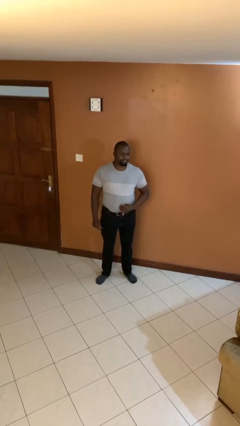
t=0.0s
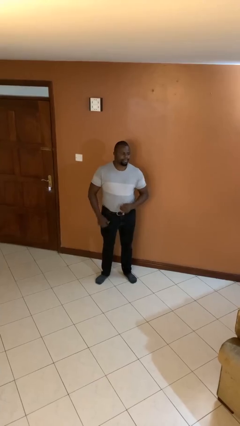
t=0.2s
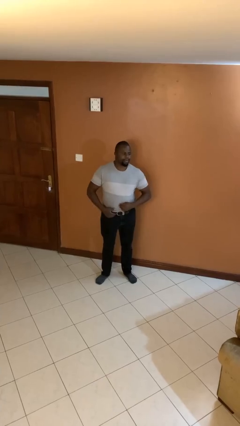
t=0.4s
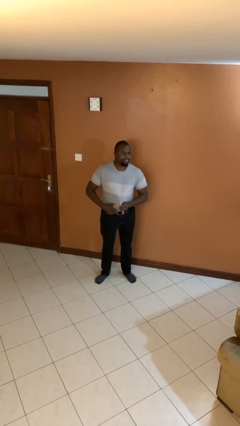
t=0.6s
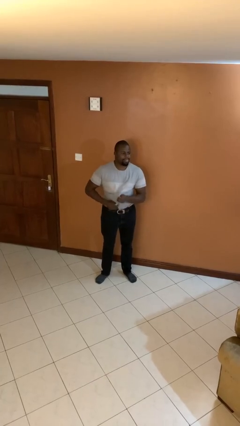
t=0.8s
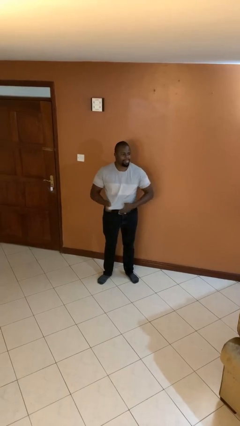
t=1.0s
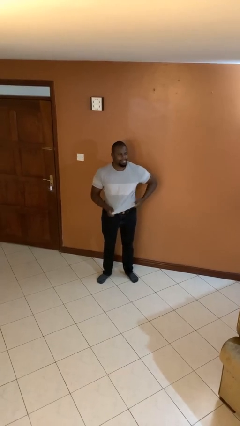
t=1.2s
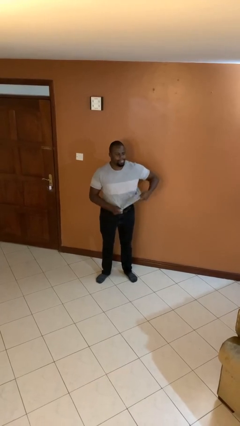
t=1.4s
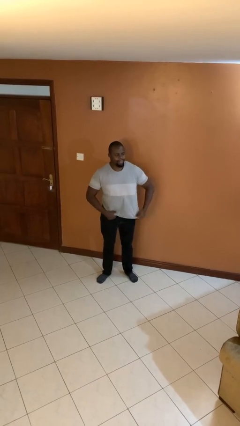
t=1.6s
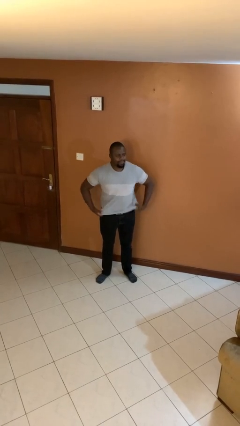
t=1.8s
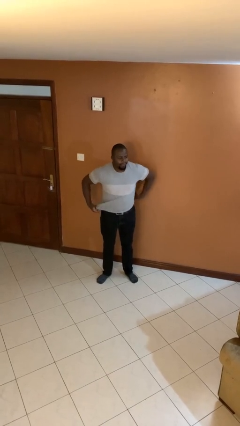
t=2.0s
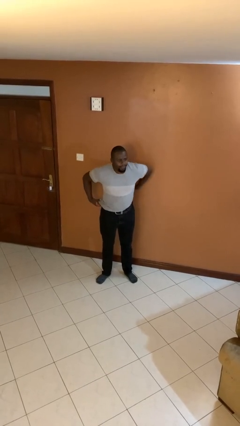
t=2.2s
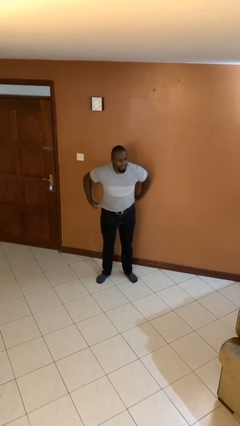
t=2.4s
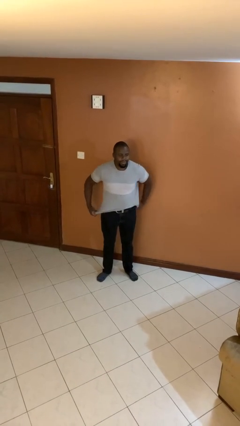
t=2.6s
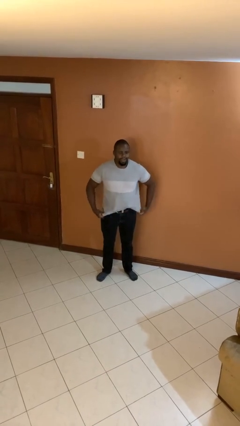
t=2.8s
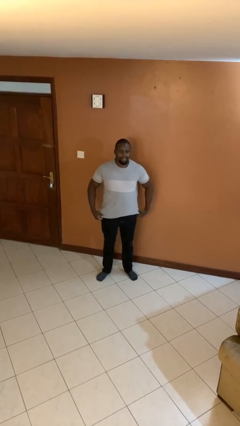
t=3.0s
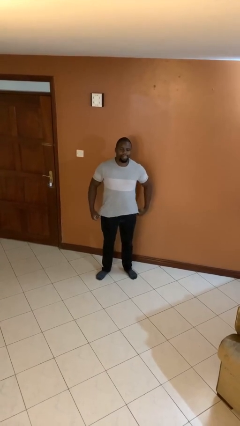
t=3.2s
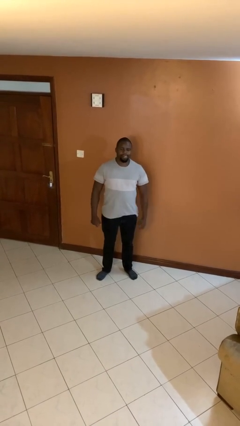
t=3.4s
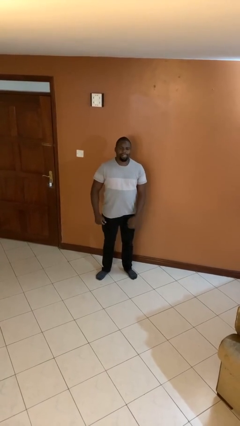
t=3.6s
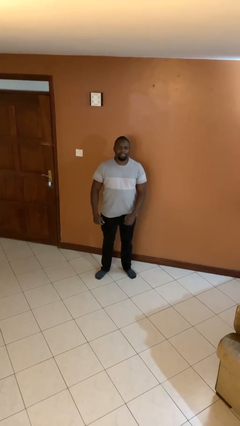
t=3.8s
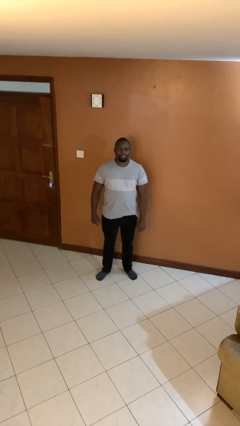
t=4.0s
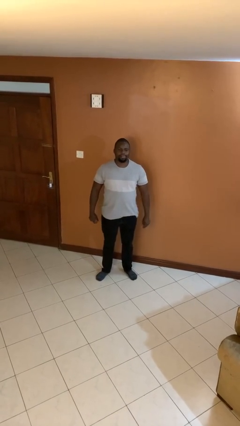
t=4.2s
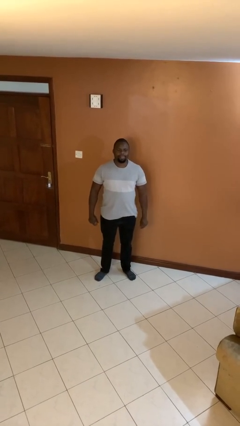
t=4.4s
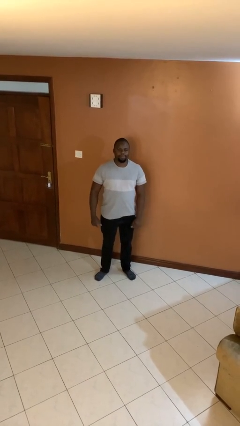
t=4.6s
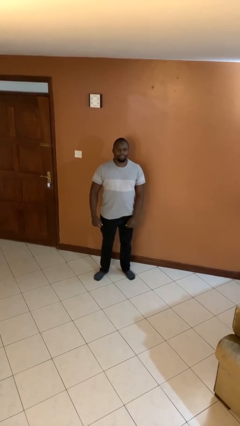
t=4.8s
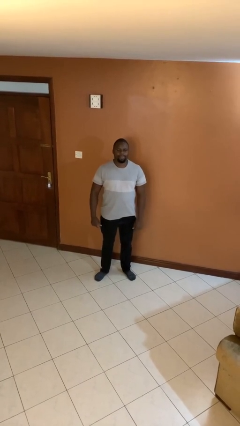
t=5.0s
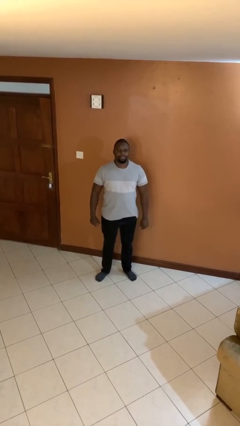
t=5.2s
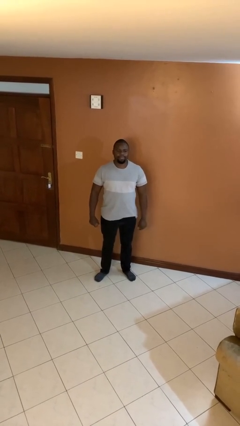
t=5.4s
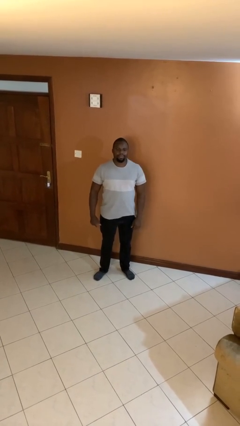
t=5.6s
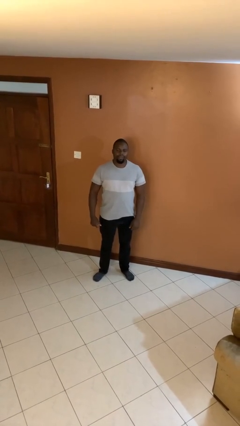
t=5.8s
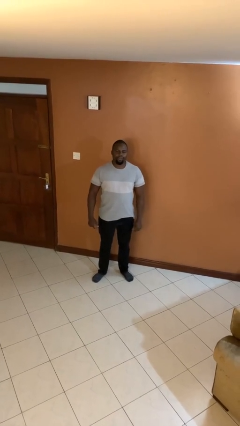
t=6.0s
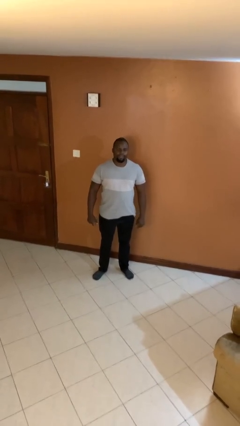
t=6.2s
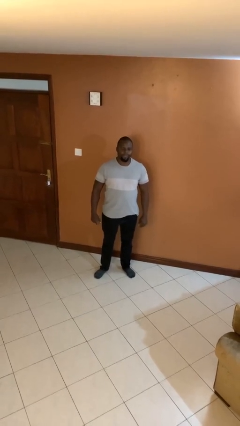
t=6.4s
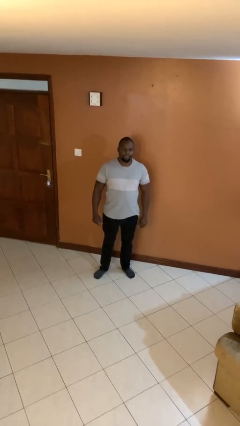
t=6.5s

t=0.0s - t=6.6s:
person untucks shirt

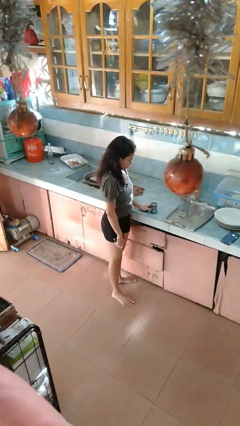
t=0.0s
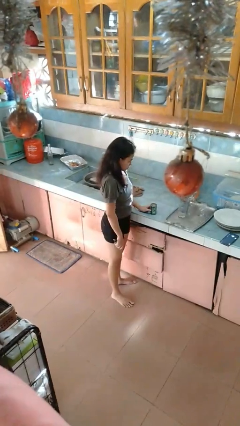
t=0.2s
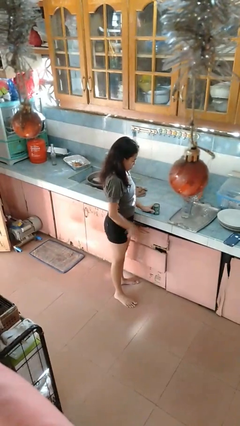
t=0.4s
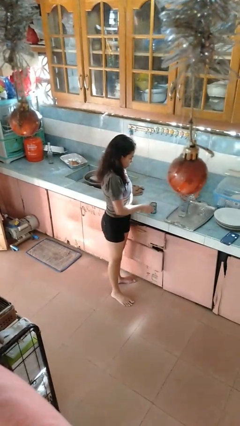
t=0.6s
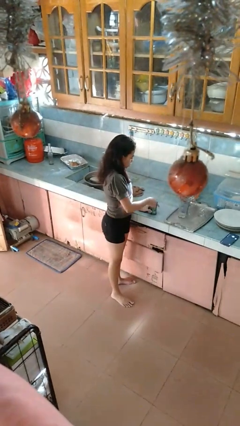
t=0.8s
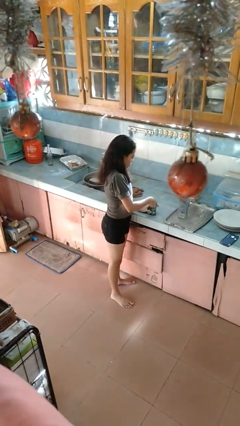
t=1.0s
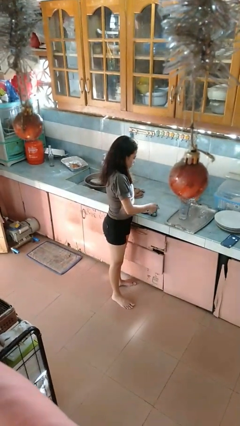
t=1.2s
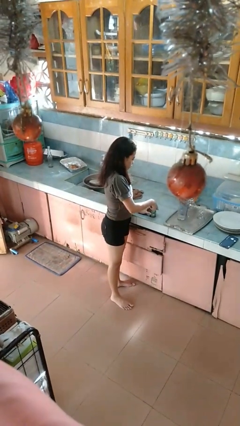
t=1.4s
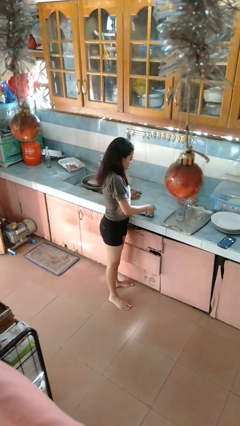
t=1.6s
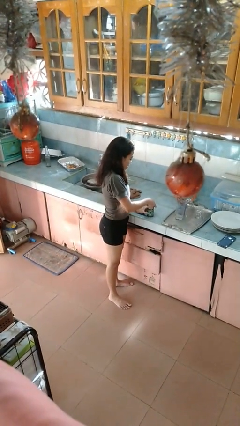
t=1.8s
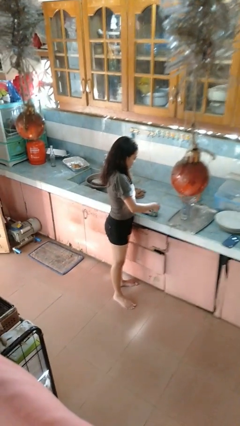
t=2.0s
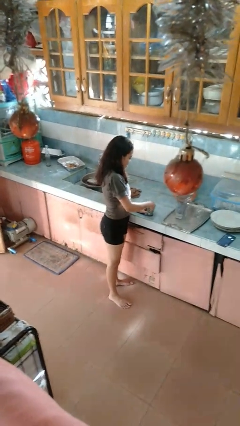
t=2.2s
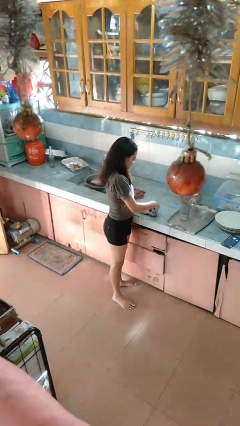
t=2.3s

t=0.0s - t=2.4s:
person opens can with can opener

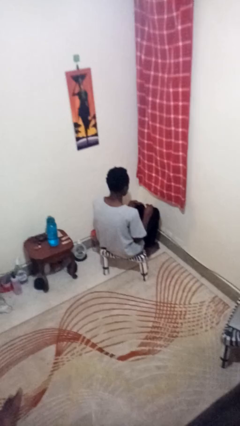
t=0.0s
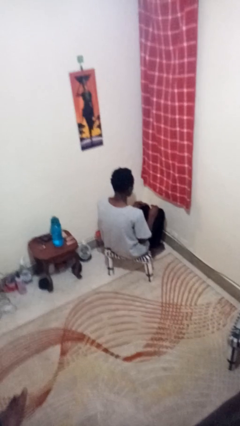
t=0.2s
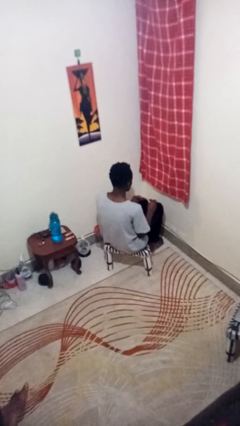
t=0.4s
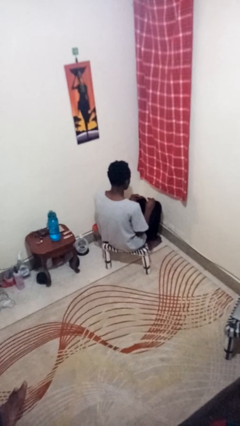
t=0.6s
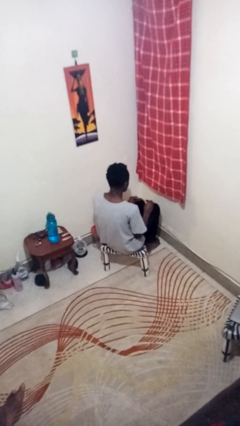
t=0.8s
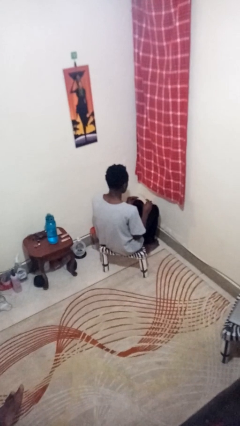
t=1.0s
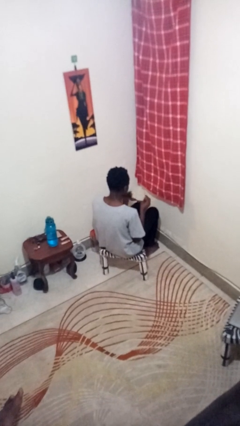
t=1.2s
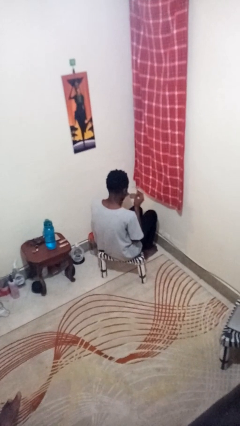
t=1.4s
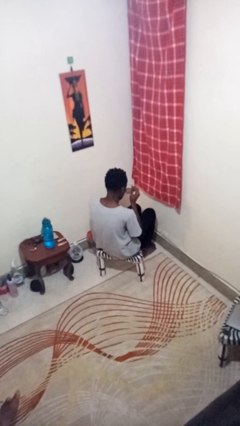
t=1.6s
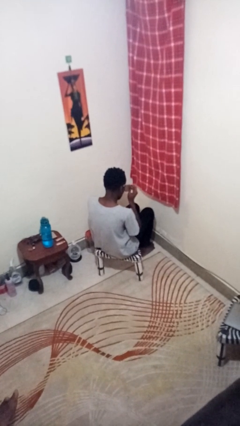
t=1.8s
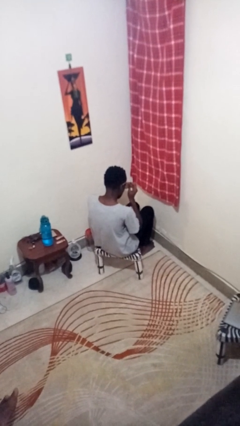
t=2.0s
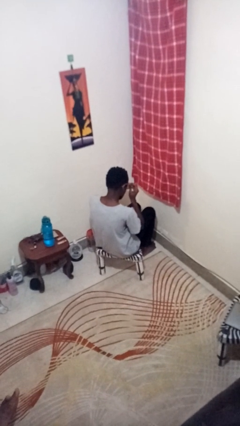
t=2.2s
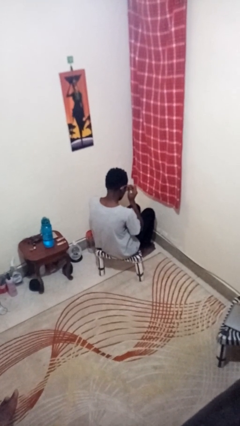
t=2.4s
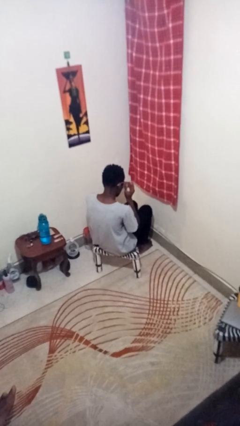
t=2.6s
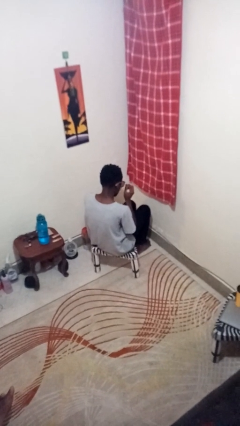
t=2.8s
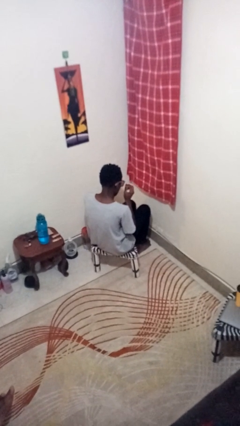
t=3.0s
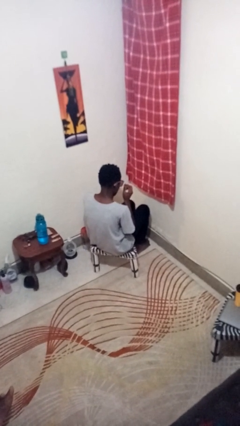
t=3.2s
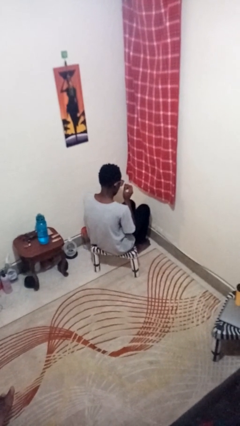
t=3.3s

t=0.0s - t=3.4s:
person puts on glasses

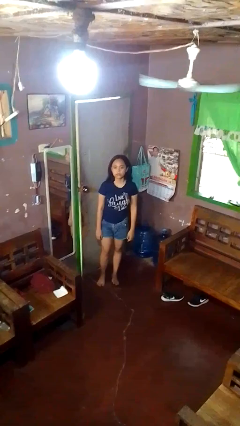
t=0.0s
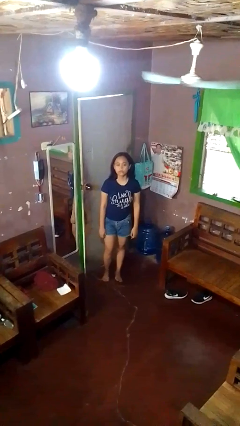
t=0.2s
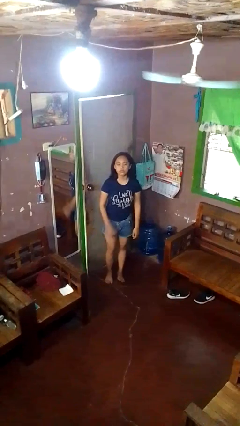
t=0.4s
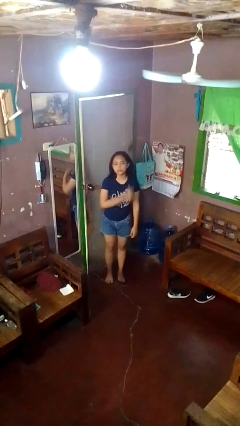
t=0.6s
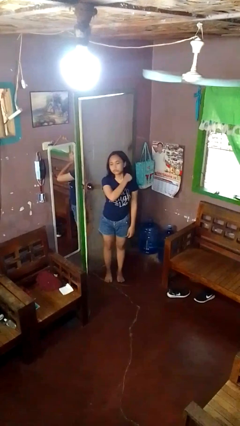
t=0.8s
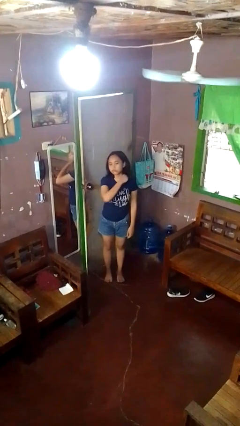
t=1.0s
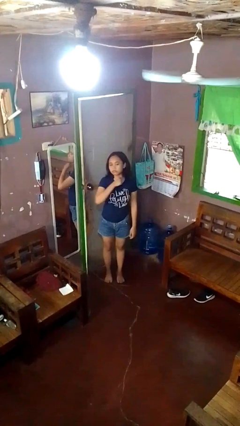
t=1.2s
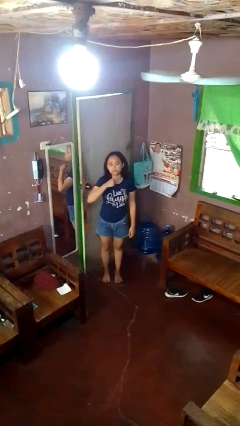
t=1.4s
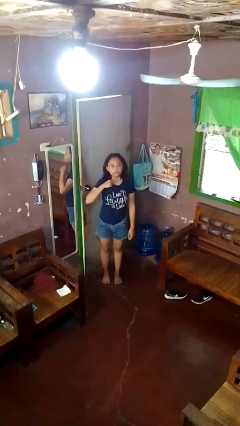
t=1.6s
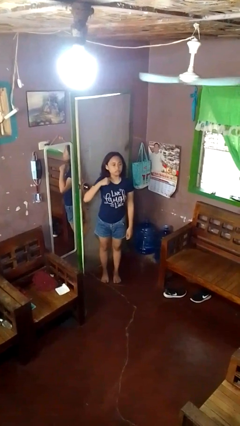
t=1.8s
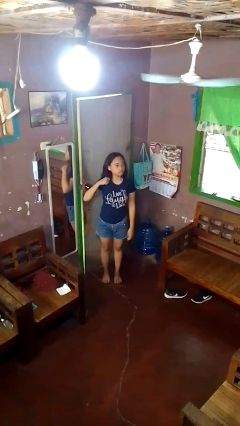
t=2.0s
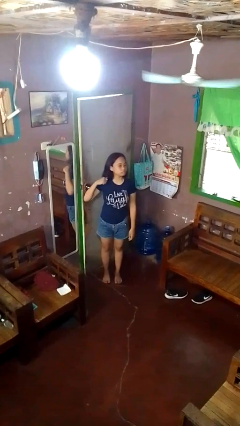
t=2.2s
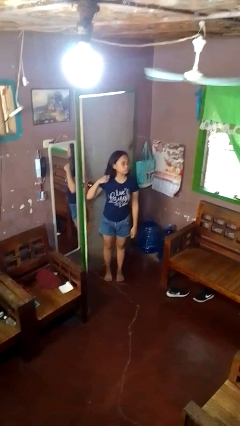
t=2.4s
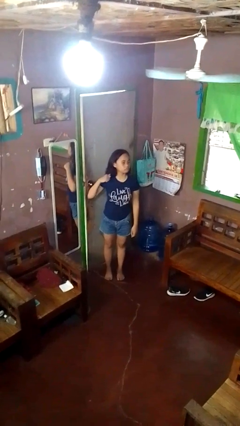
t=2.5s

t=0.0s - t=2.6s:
person gestures cut

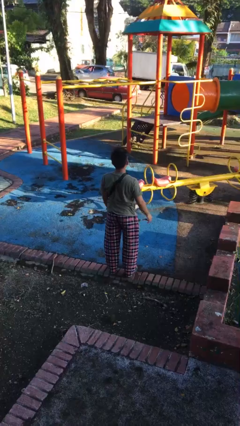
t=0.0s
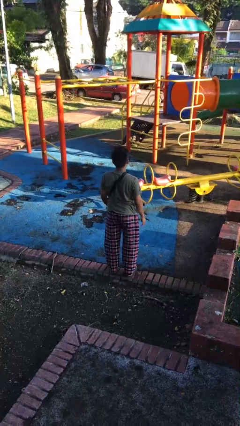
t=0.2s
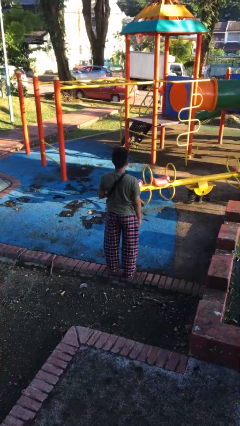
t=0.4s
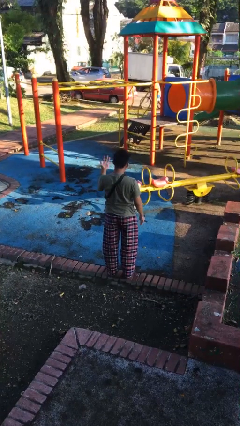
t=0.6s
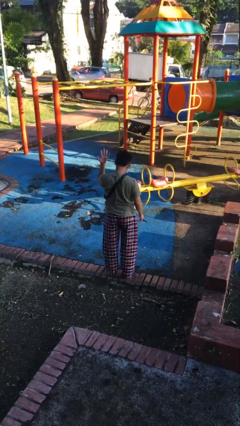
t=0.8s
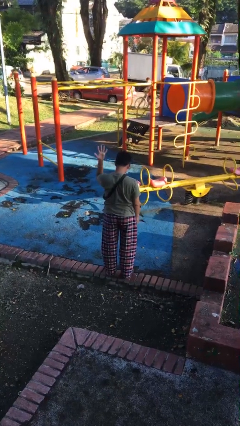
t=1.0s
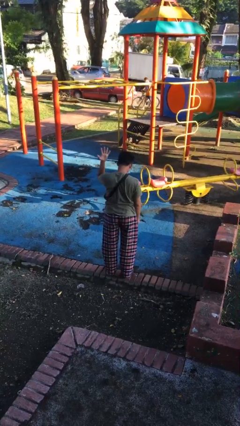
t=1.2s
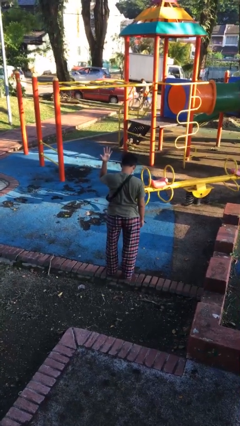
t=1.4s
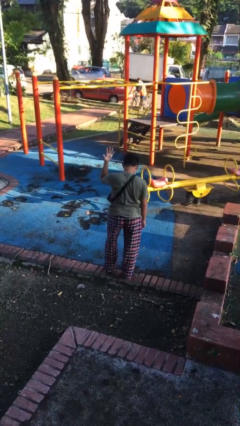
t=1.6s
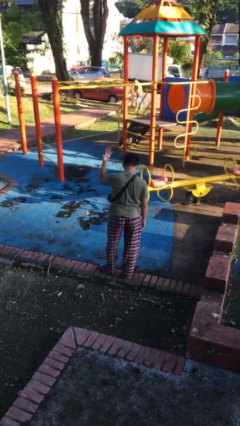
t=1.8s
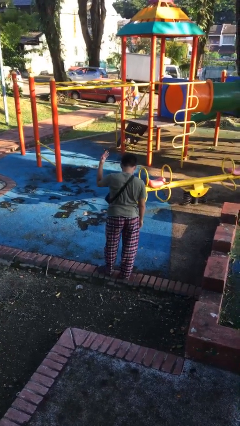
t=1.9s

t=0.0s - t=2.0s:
person gestures number five

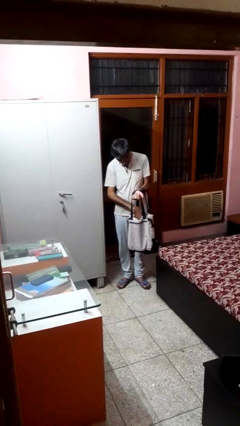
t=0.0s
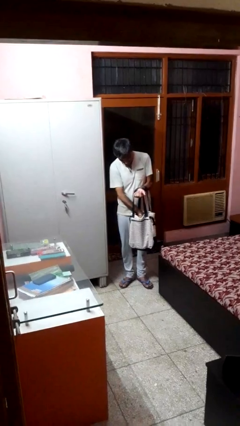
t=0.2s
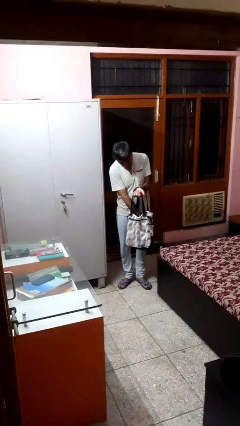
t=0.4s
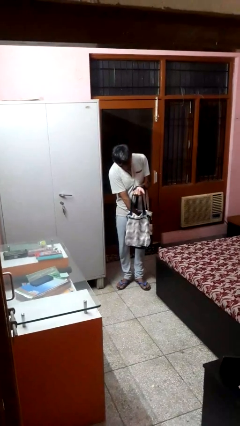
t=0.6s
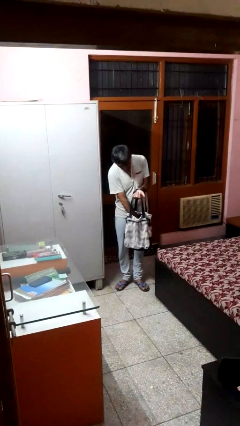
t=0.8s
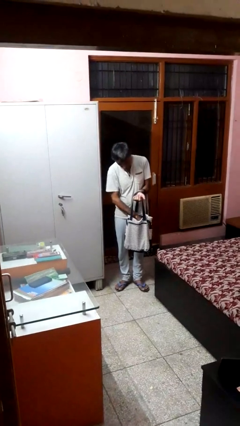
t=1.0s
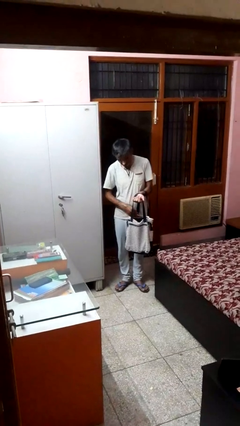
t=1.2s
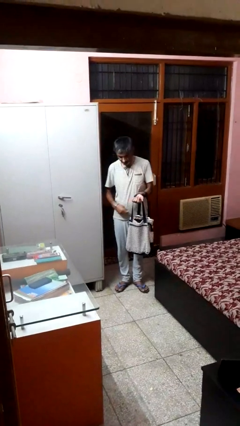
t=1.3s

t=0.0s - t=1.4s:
person puts object into bag
